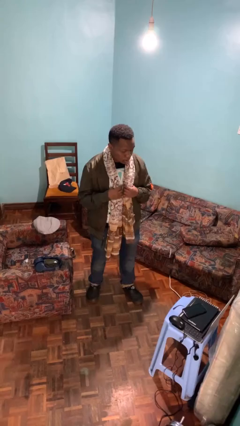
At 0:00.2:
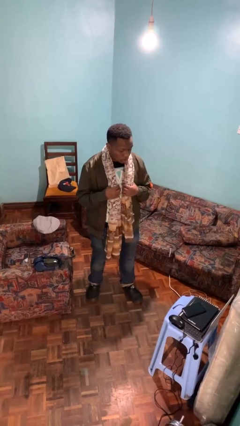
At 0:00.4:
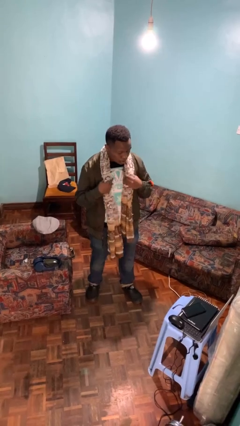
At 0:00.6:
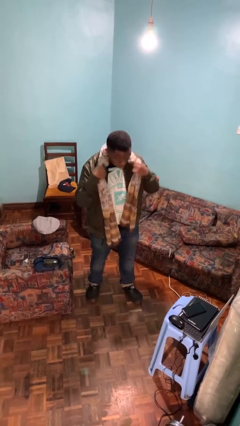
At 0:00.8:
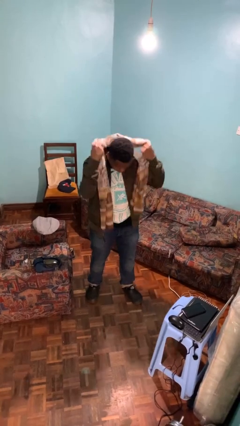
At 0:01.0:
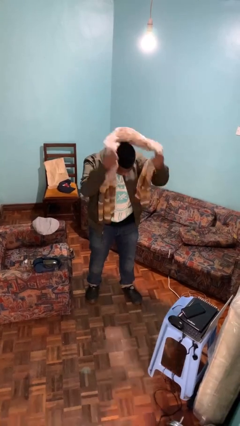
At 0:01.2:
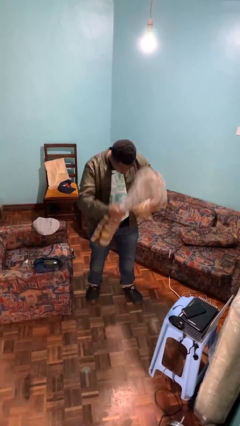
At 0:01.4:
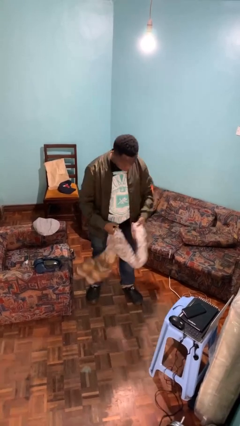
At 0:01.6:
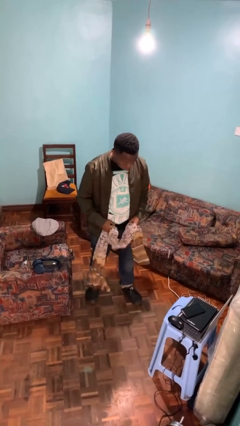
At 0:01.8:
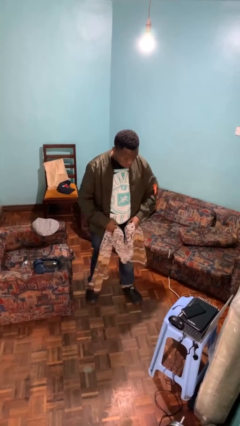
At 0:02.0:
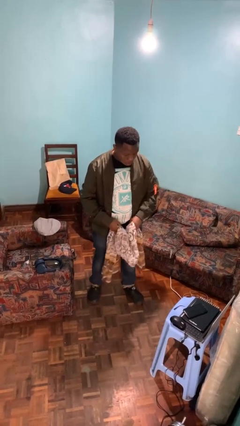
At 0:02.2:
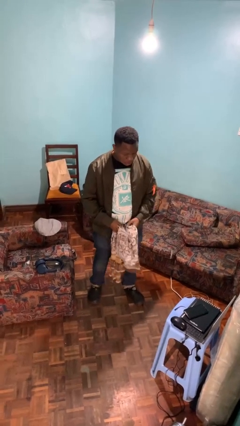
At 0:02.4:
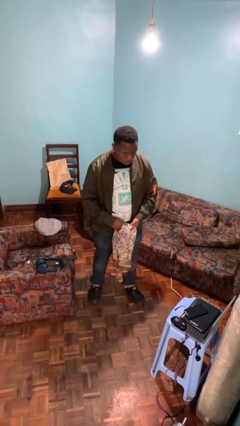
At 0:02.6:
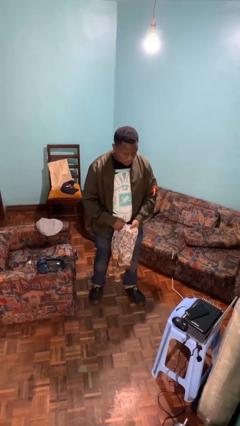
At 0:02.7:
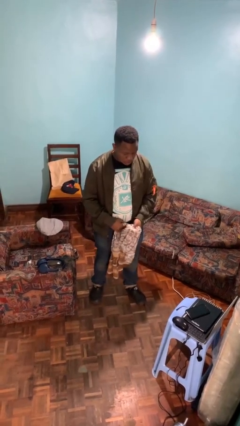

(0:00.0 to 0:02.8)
person takes off scarf

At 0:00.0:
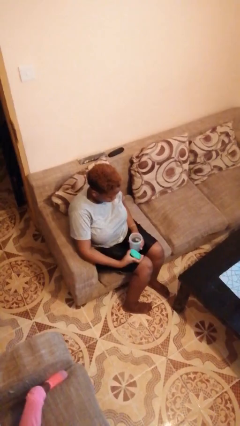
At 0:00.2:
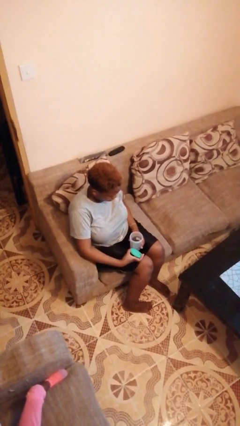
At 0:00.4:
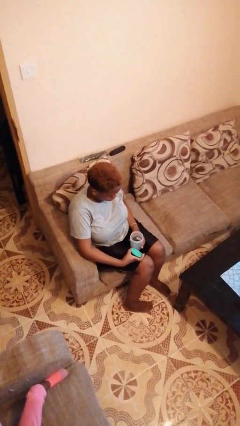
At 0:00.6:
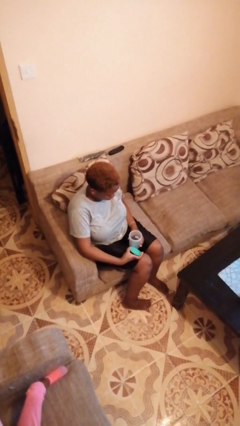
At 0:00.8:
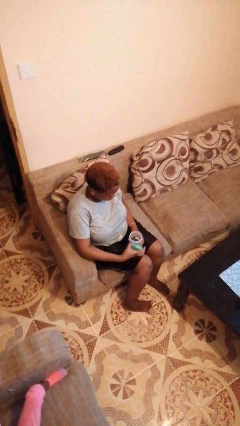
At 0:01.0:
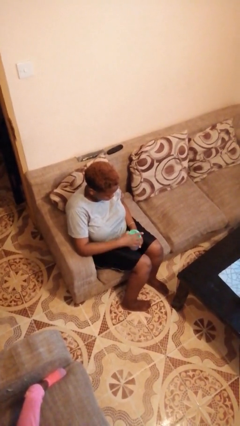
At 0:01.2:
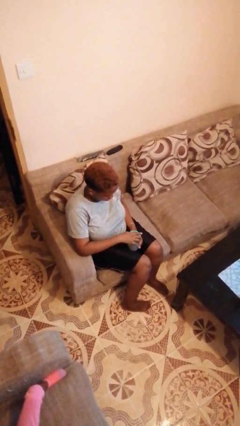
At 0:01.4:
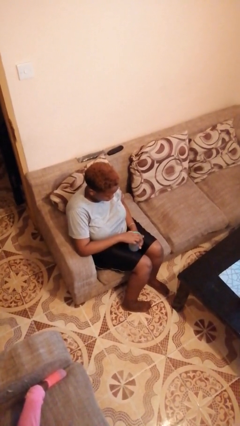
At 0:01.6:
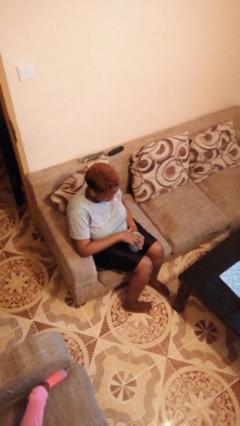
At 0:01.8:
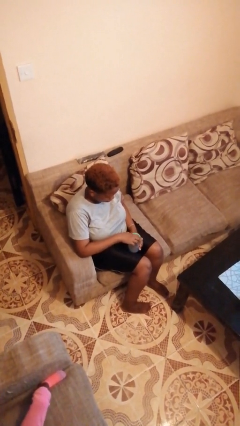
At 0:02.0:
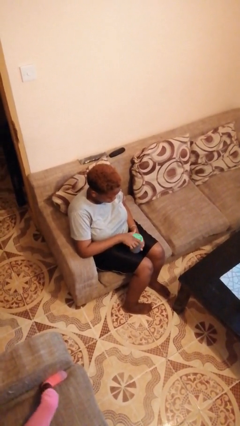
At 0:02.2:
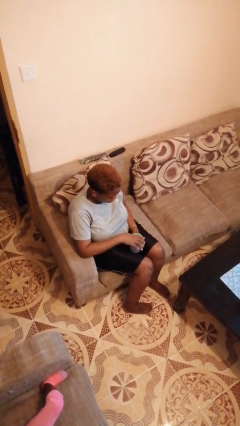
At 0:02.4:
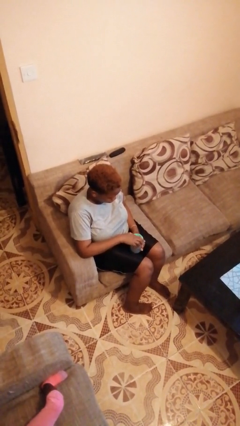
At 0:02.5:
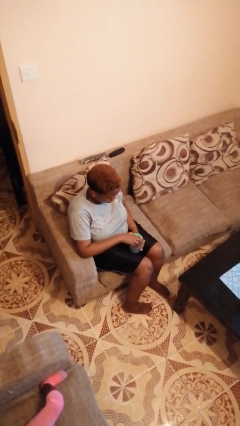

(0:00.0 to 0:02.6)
person closes jar

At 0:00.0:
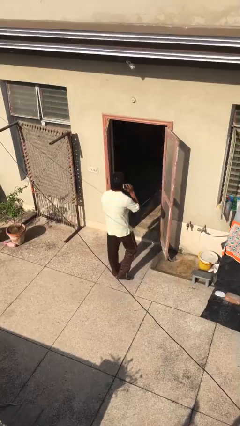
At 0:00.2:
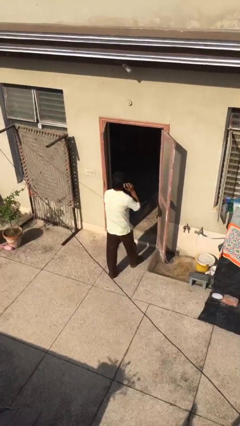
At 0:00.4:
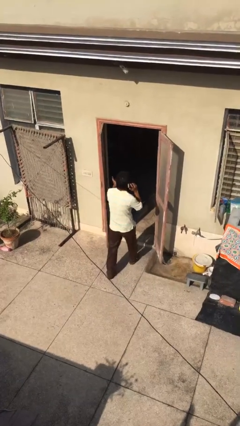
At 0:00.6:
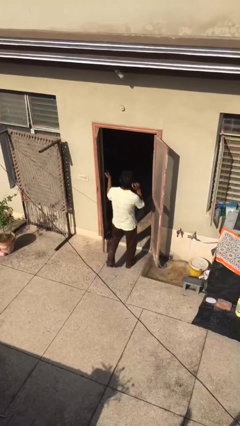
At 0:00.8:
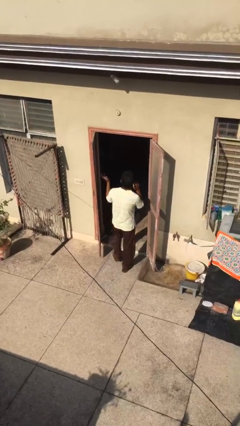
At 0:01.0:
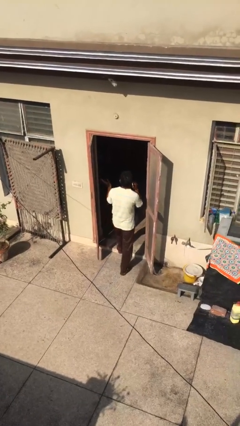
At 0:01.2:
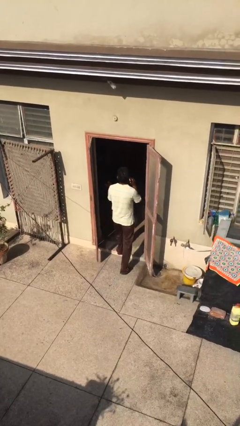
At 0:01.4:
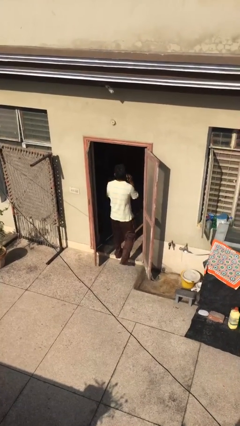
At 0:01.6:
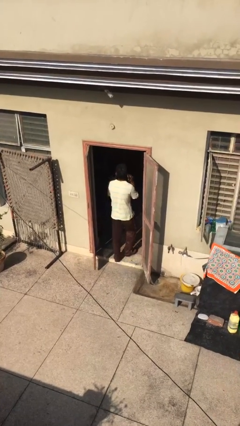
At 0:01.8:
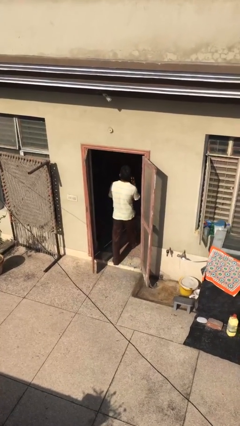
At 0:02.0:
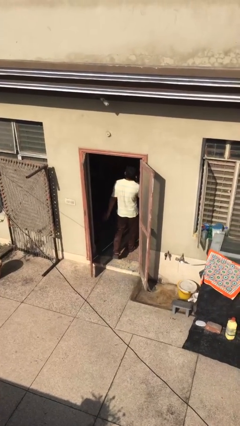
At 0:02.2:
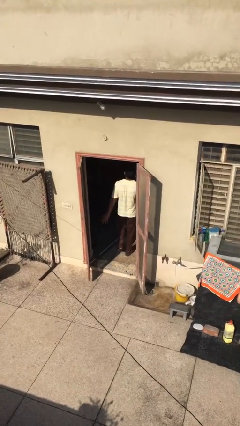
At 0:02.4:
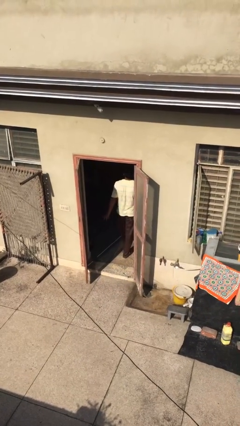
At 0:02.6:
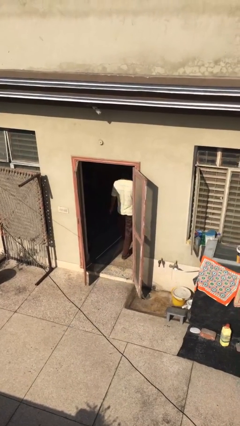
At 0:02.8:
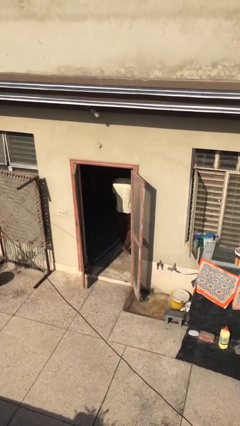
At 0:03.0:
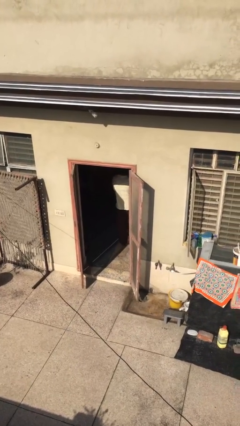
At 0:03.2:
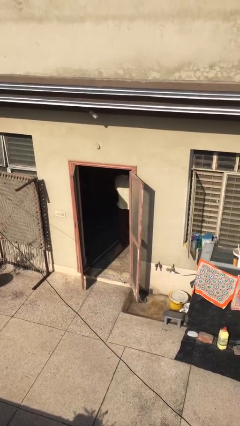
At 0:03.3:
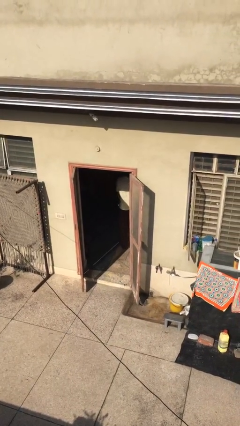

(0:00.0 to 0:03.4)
person exits scene through structure

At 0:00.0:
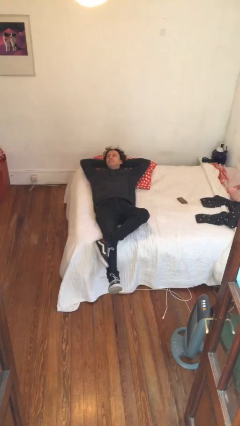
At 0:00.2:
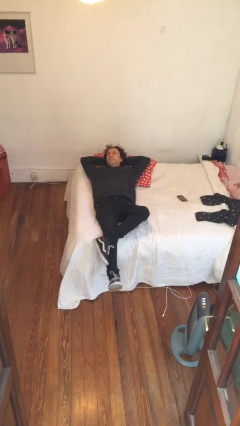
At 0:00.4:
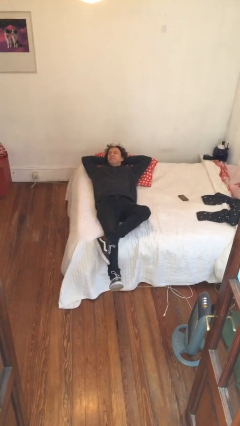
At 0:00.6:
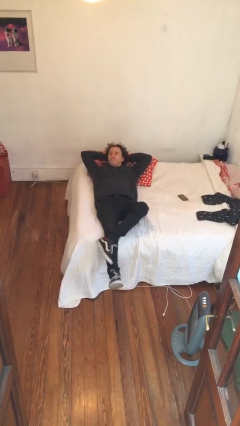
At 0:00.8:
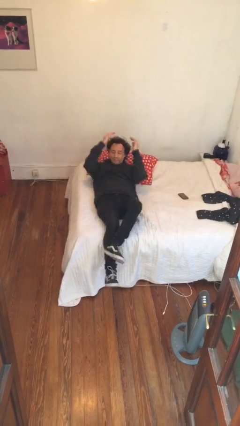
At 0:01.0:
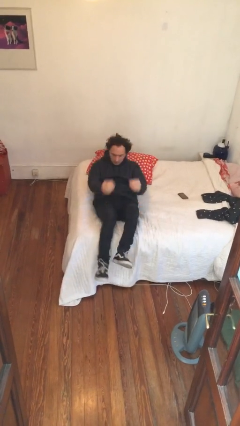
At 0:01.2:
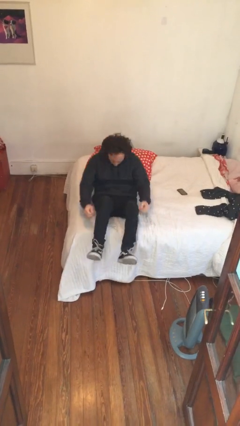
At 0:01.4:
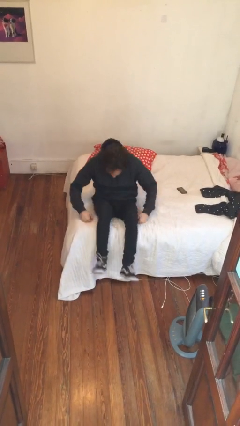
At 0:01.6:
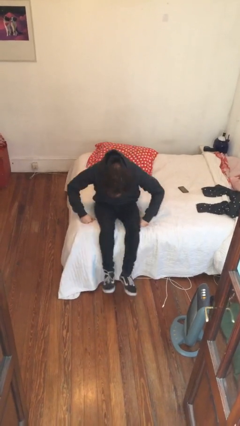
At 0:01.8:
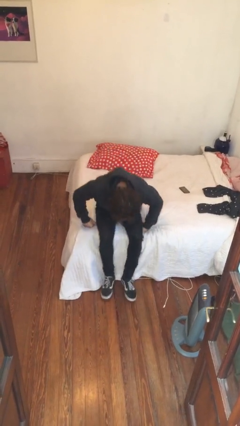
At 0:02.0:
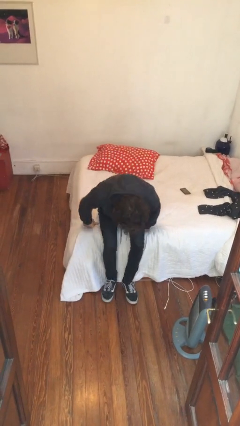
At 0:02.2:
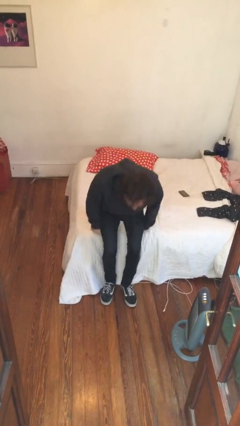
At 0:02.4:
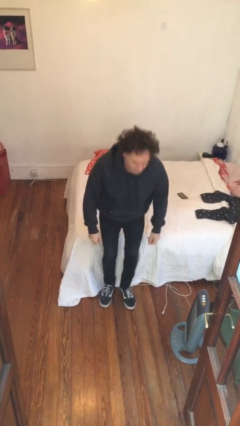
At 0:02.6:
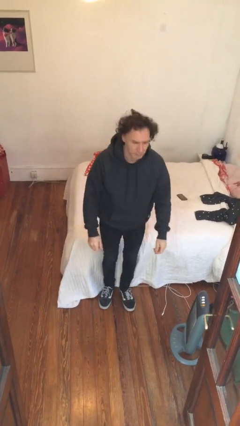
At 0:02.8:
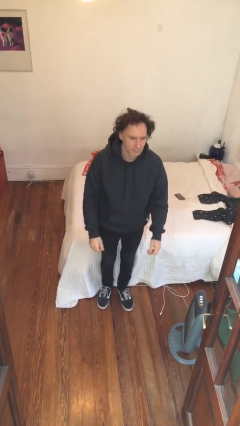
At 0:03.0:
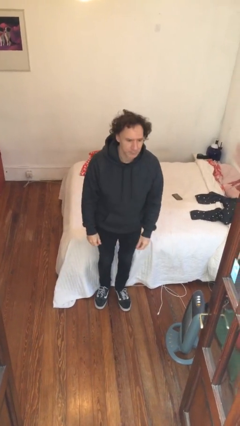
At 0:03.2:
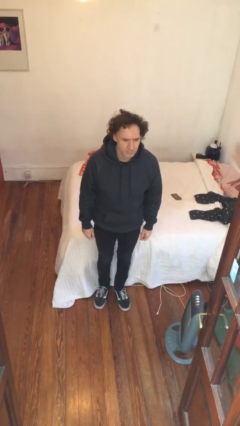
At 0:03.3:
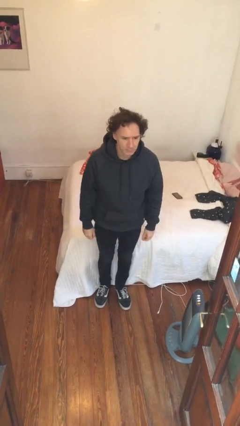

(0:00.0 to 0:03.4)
person stands up

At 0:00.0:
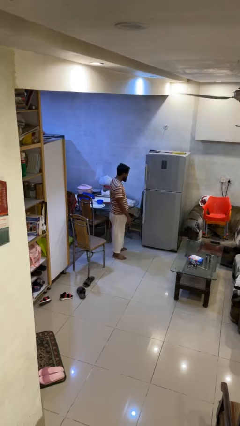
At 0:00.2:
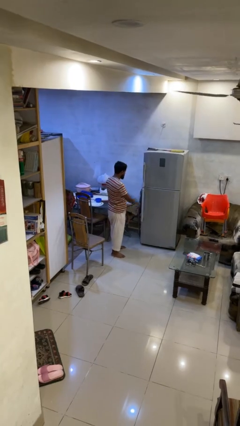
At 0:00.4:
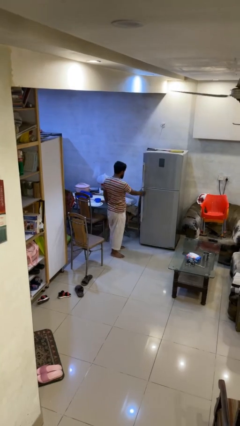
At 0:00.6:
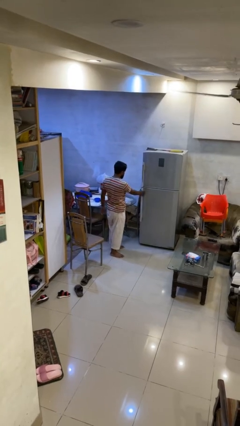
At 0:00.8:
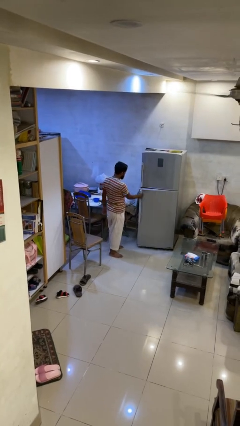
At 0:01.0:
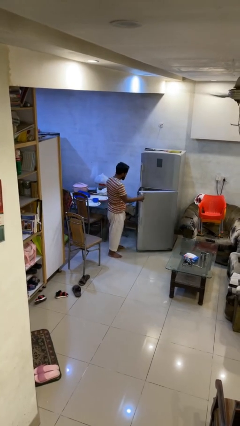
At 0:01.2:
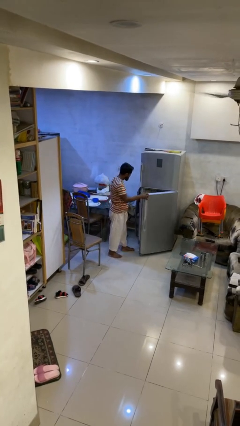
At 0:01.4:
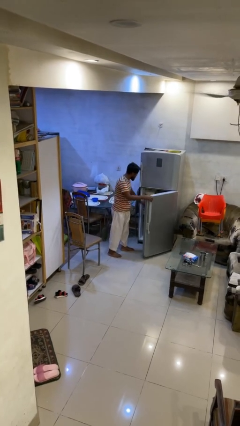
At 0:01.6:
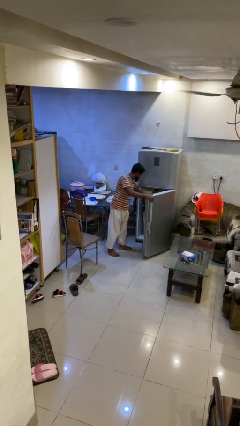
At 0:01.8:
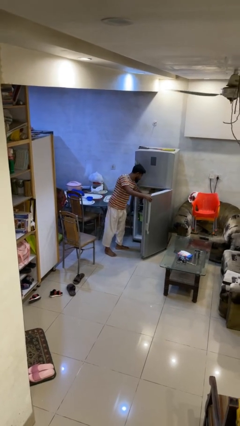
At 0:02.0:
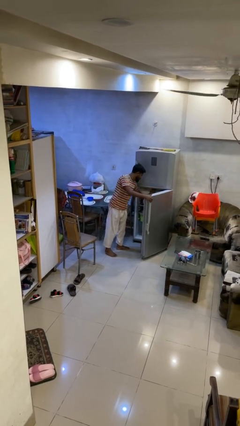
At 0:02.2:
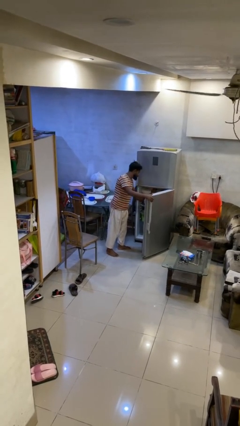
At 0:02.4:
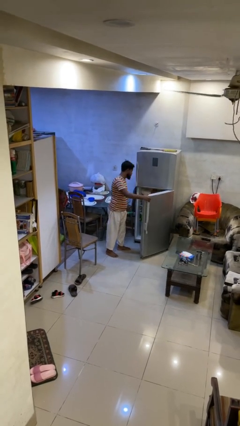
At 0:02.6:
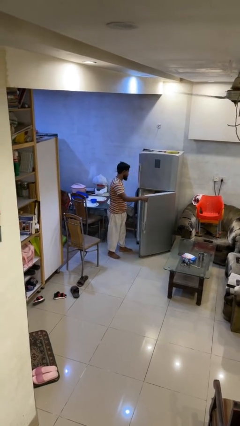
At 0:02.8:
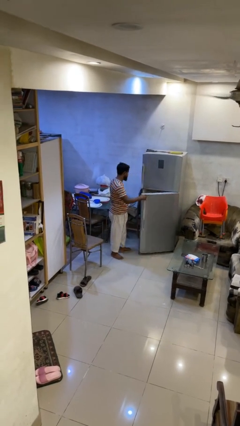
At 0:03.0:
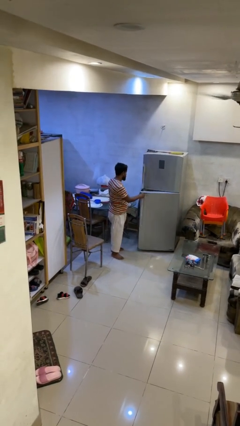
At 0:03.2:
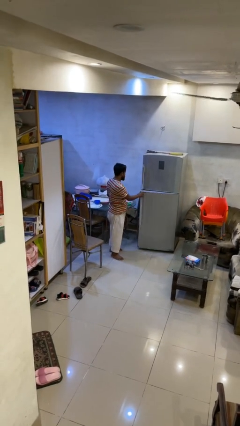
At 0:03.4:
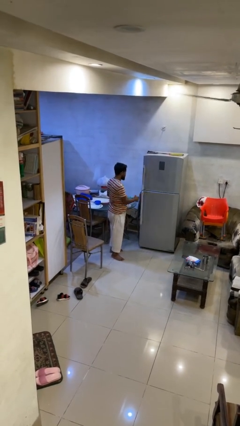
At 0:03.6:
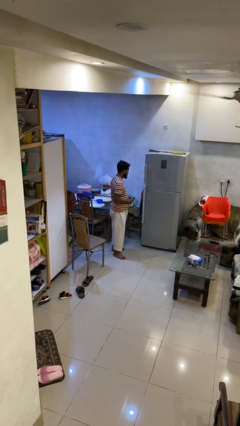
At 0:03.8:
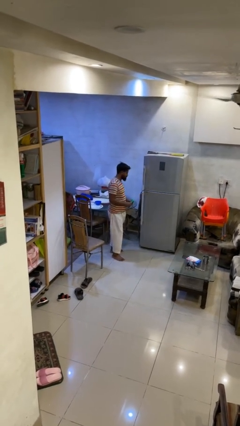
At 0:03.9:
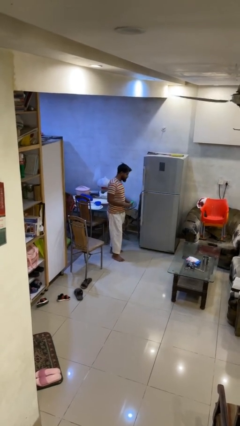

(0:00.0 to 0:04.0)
person takes object from refrigerator

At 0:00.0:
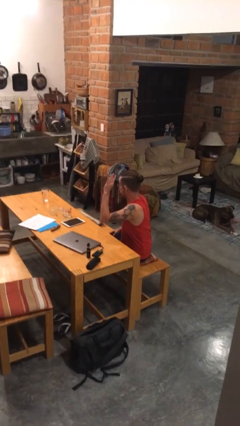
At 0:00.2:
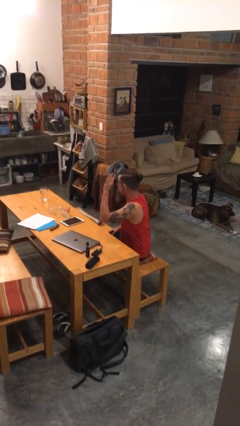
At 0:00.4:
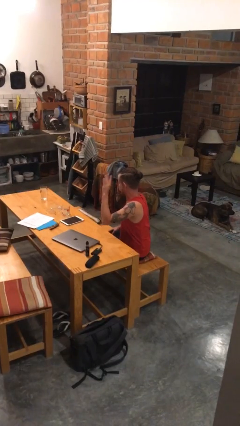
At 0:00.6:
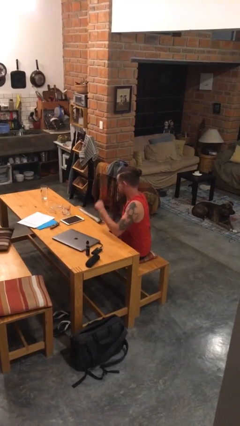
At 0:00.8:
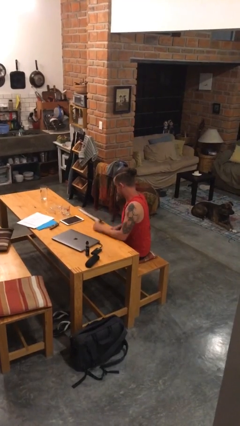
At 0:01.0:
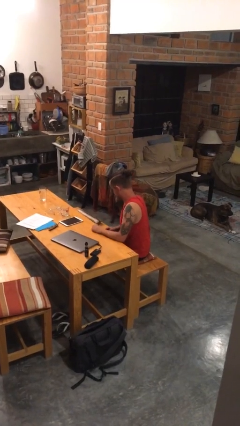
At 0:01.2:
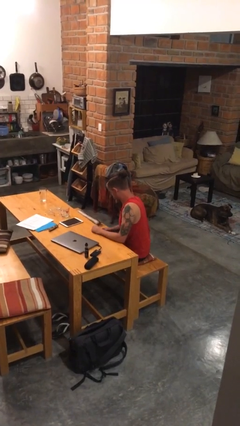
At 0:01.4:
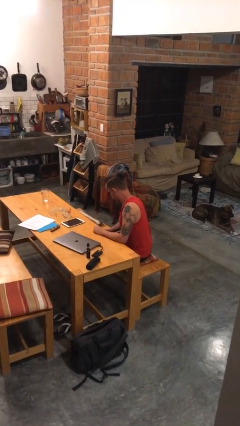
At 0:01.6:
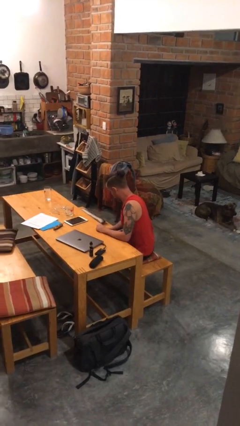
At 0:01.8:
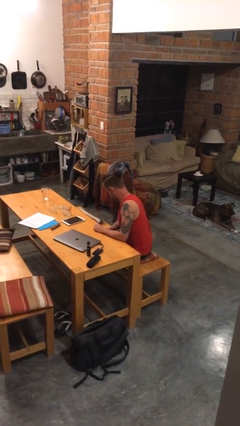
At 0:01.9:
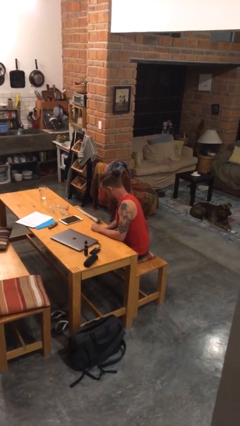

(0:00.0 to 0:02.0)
person gestures lower hand
